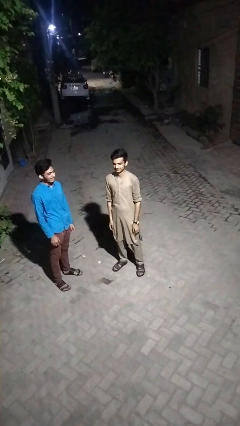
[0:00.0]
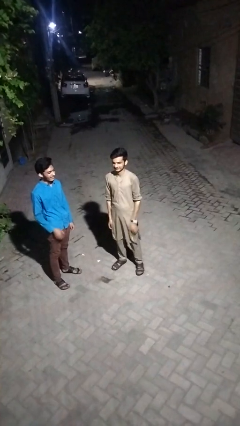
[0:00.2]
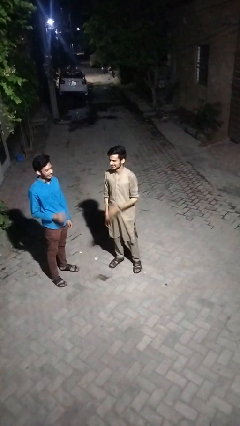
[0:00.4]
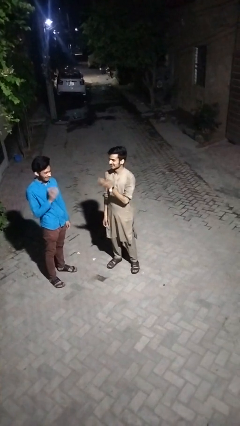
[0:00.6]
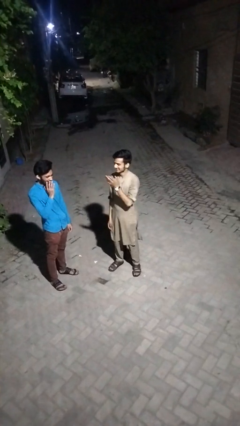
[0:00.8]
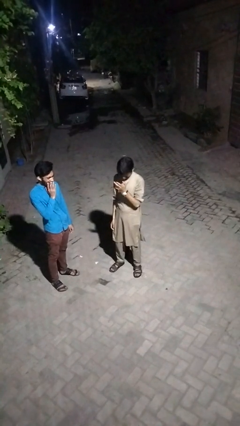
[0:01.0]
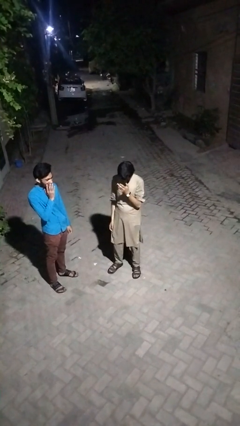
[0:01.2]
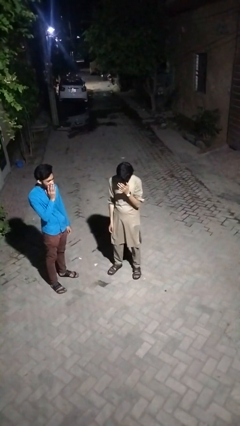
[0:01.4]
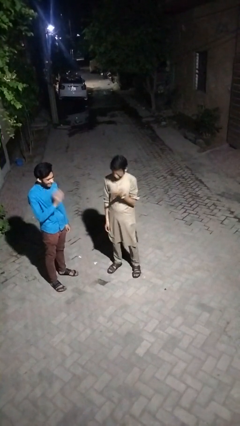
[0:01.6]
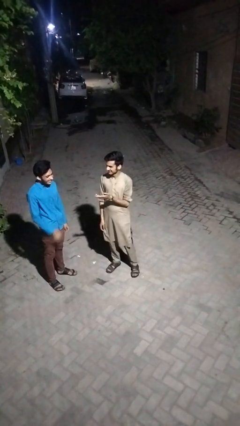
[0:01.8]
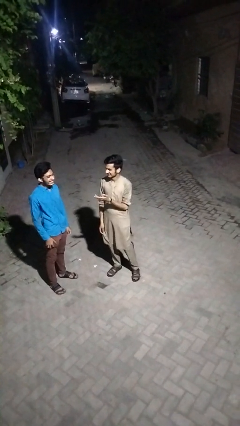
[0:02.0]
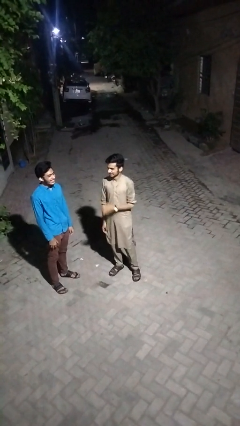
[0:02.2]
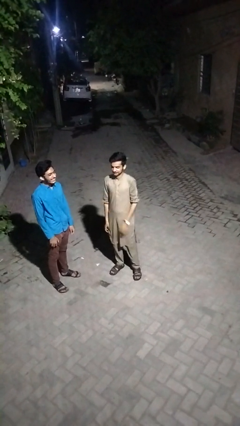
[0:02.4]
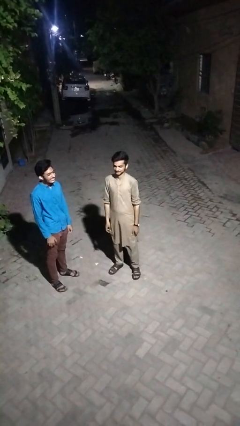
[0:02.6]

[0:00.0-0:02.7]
person laughs with person

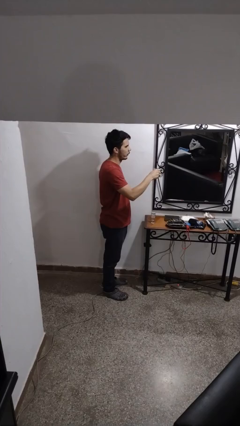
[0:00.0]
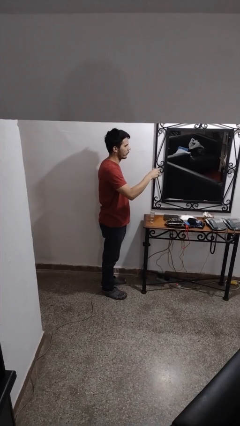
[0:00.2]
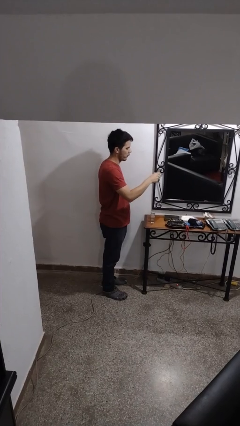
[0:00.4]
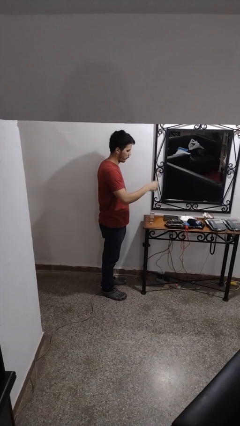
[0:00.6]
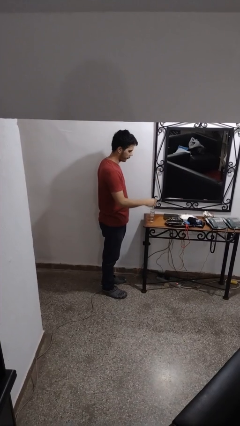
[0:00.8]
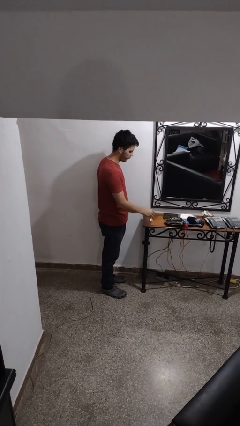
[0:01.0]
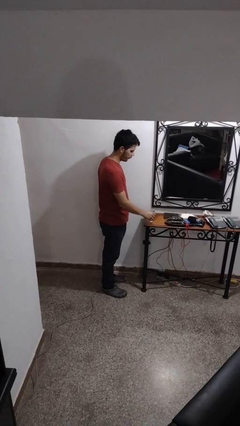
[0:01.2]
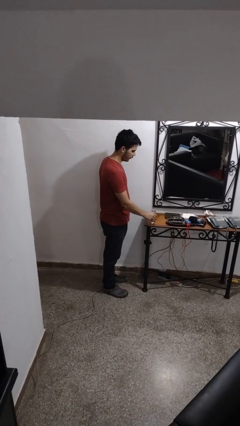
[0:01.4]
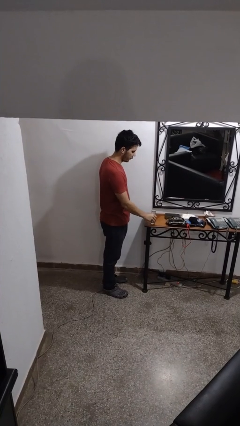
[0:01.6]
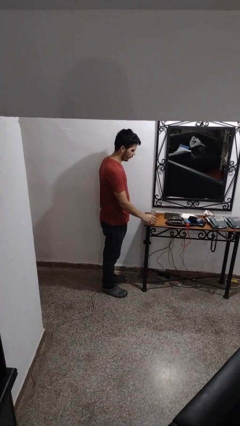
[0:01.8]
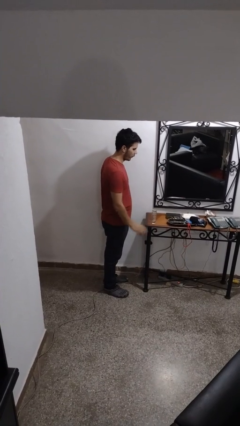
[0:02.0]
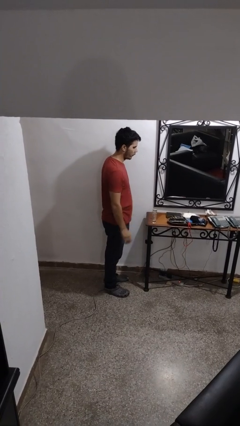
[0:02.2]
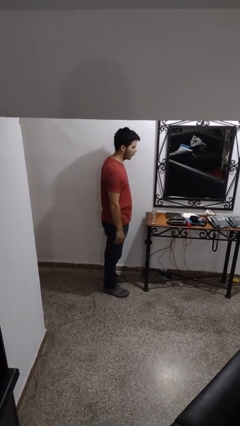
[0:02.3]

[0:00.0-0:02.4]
person puts down object on table

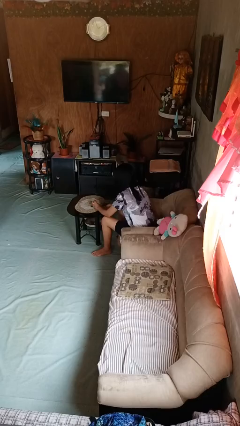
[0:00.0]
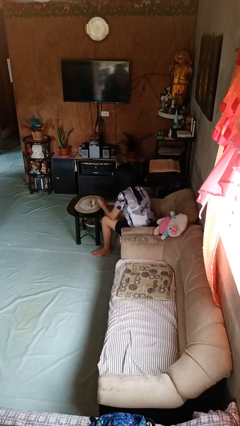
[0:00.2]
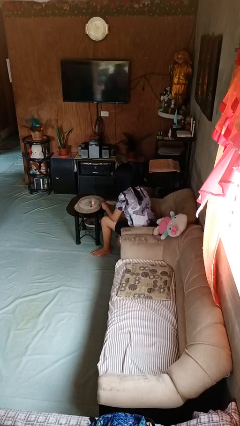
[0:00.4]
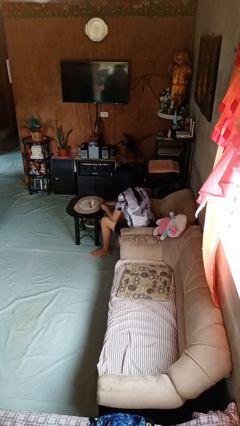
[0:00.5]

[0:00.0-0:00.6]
person paints fingernails

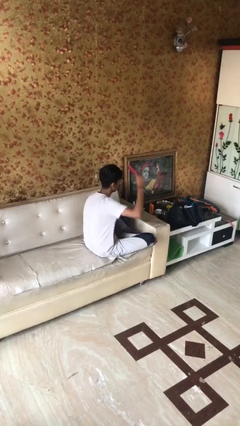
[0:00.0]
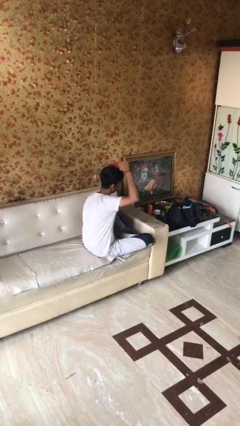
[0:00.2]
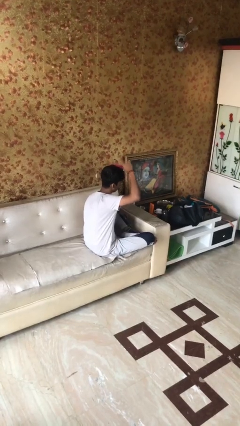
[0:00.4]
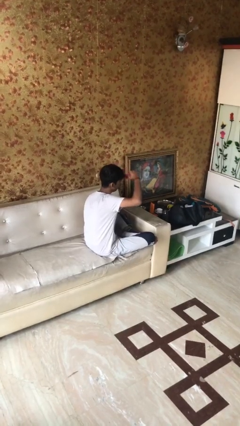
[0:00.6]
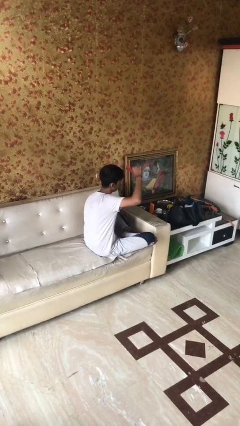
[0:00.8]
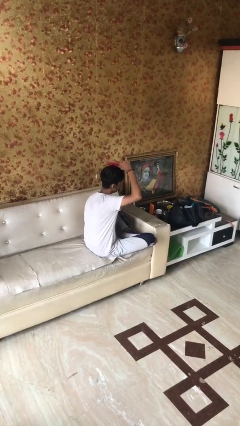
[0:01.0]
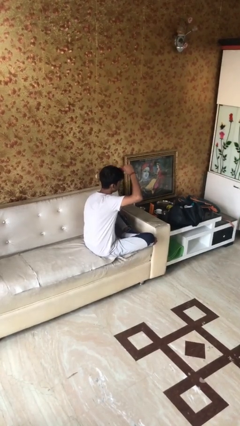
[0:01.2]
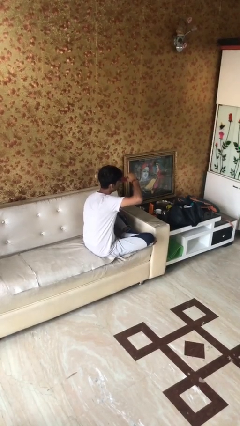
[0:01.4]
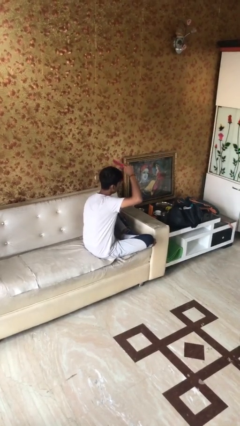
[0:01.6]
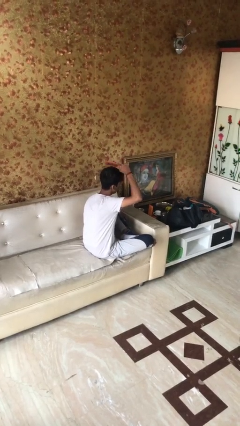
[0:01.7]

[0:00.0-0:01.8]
person brushes hair

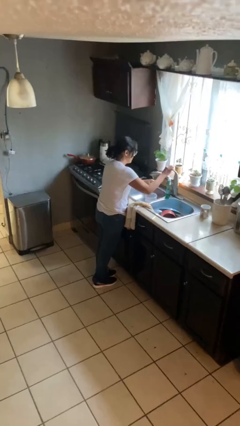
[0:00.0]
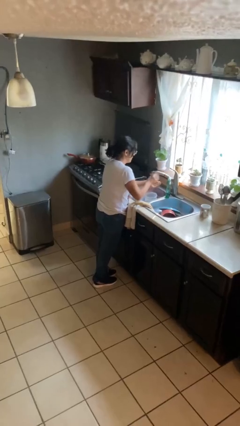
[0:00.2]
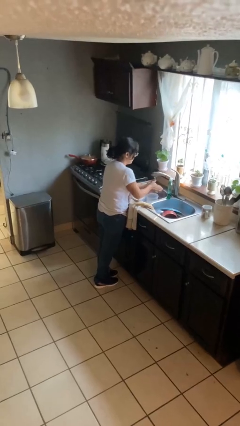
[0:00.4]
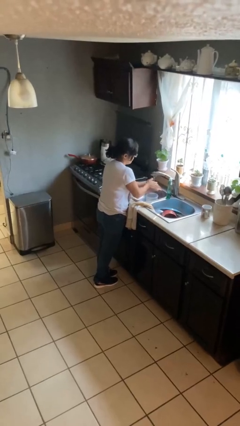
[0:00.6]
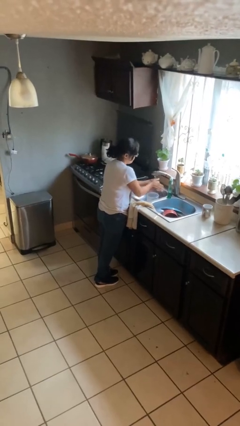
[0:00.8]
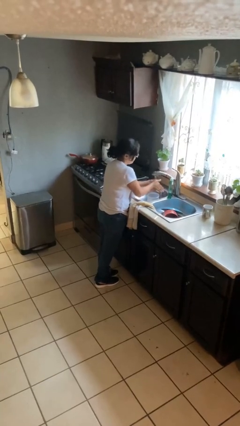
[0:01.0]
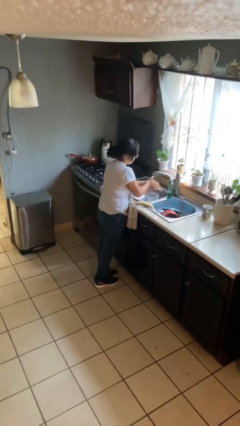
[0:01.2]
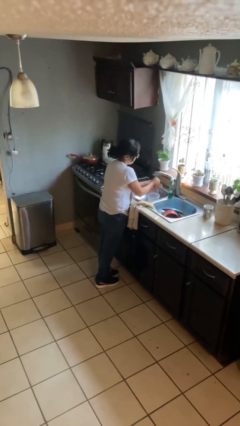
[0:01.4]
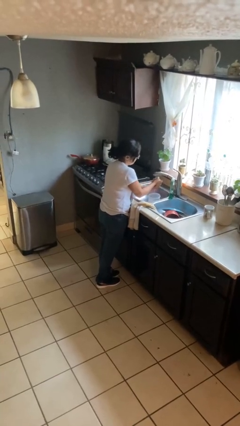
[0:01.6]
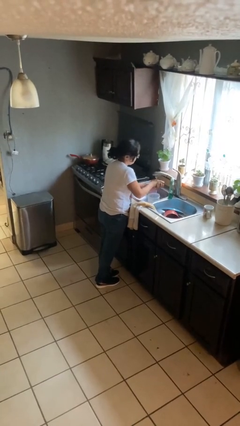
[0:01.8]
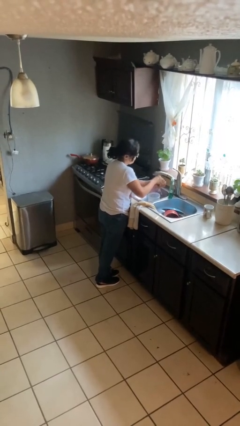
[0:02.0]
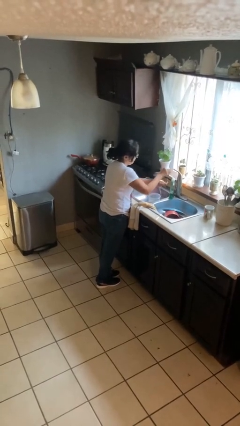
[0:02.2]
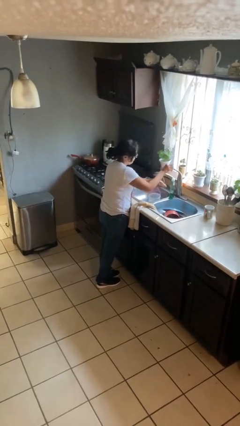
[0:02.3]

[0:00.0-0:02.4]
person washes hands

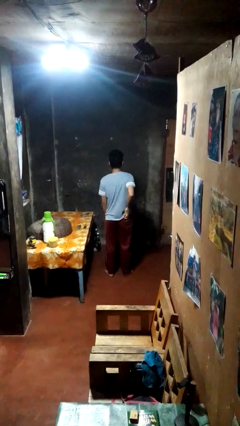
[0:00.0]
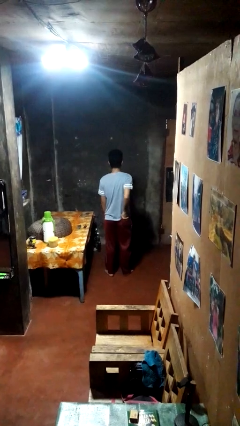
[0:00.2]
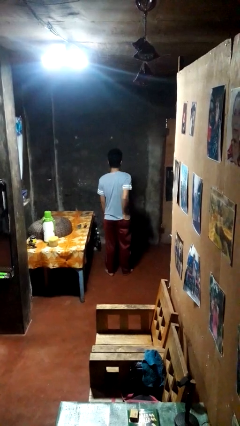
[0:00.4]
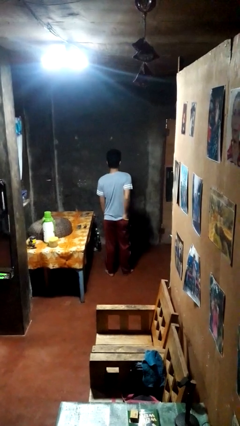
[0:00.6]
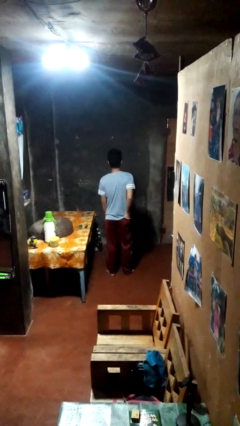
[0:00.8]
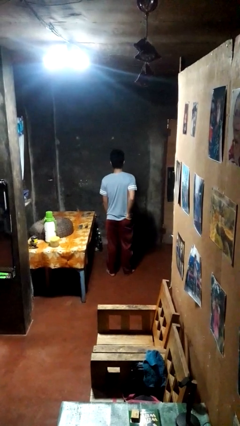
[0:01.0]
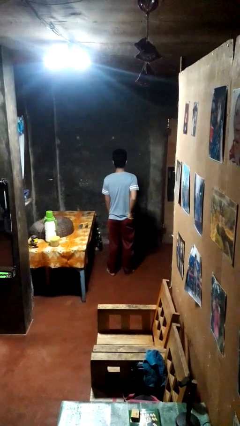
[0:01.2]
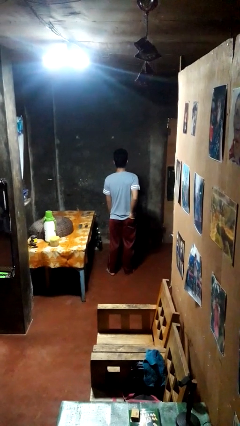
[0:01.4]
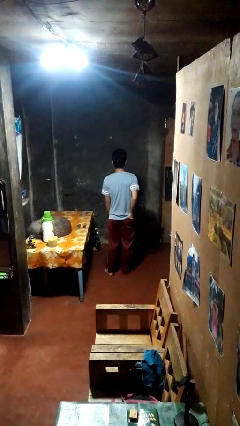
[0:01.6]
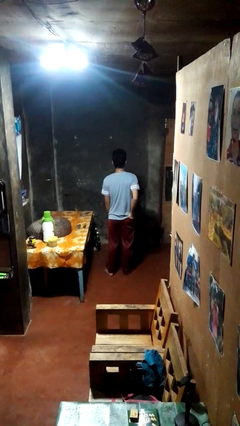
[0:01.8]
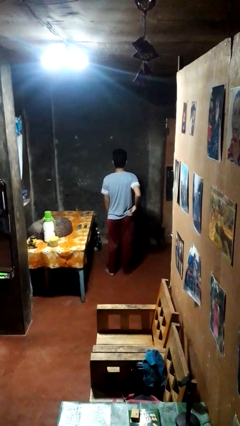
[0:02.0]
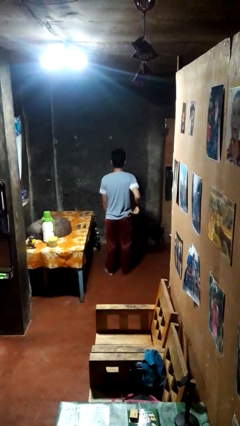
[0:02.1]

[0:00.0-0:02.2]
person puts hands in back pockets

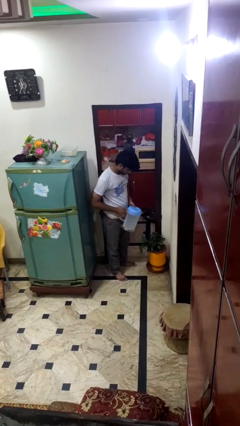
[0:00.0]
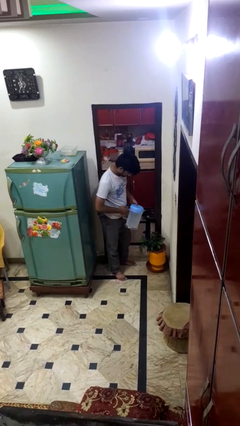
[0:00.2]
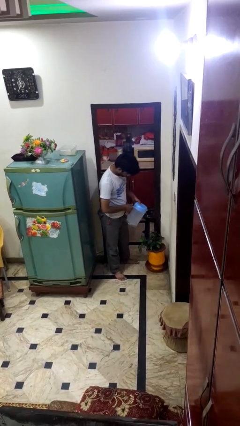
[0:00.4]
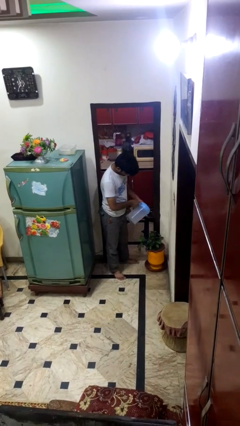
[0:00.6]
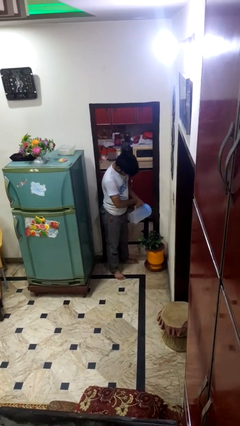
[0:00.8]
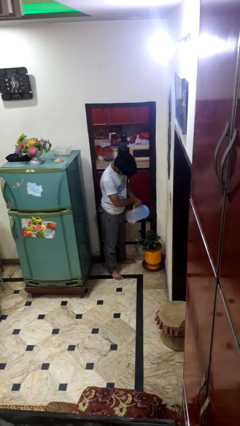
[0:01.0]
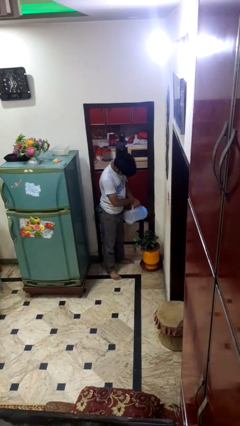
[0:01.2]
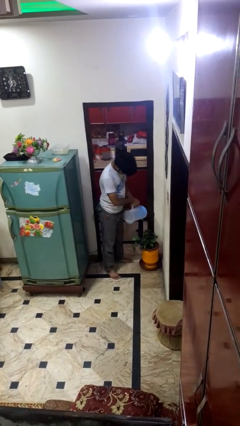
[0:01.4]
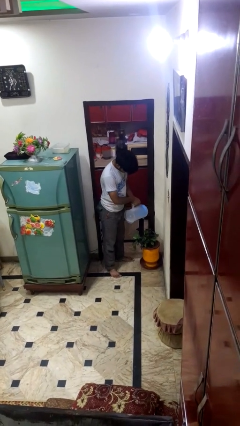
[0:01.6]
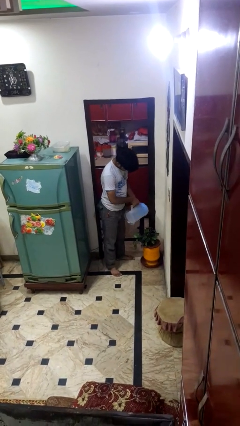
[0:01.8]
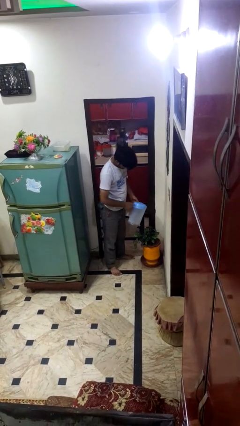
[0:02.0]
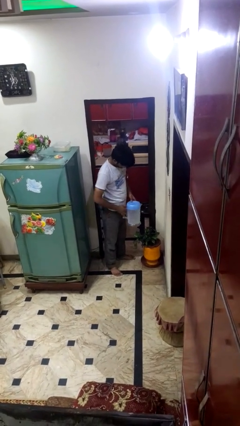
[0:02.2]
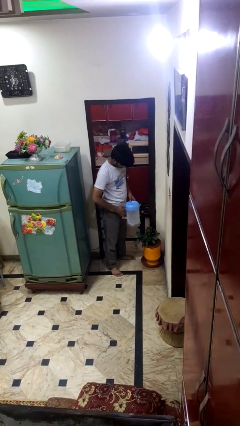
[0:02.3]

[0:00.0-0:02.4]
person waters houseplant

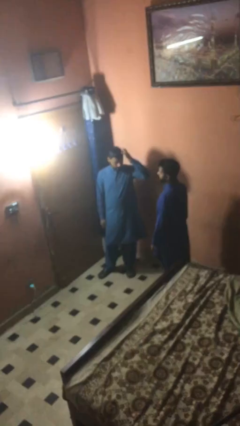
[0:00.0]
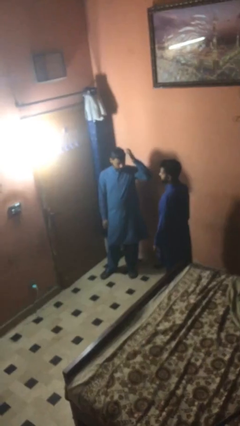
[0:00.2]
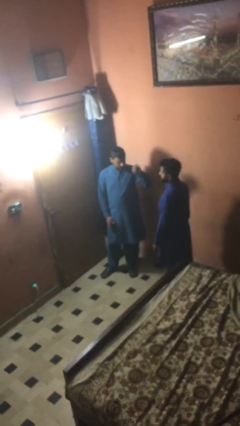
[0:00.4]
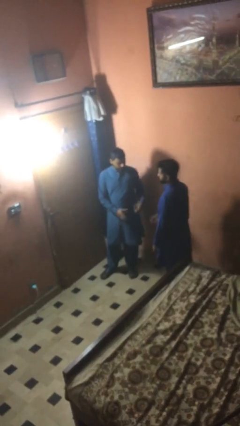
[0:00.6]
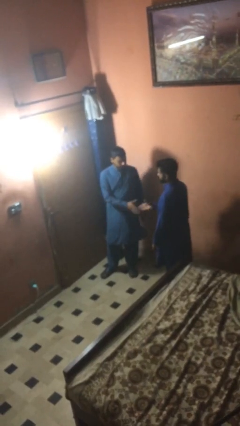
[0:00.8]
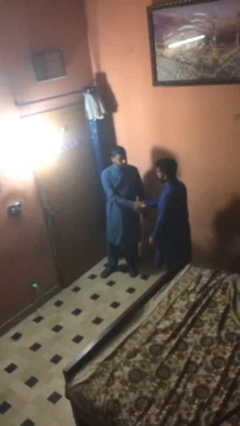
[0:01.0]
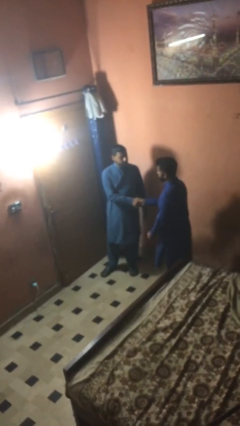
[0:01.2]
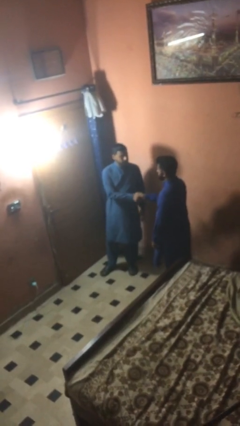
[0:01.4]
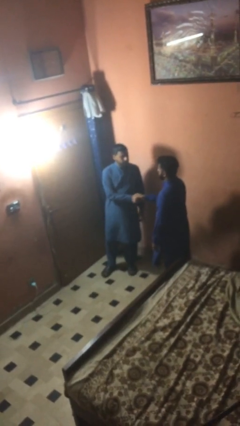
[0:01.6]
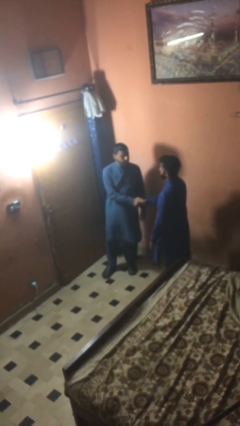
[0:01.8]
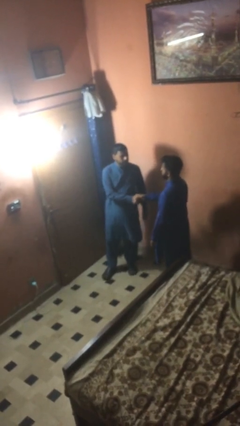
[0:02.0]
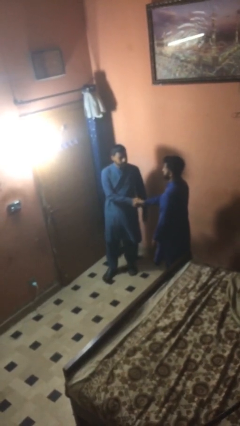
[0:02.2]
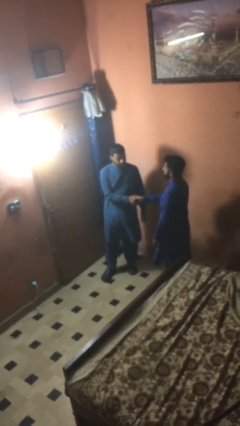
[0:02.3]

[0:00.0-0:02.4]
person shakes hand
